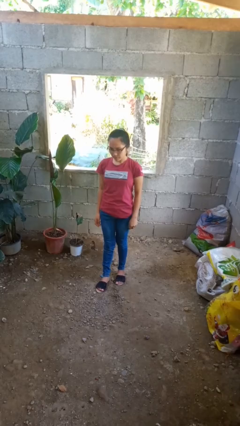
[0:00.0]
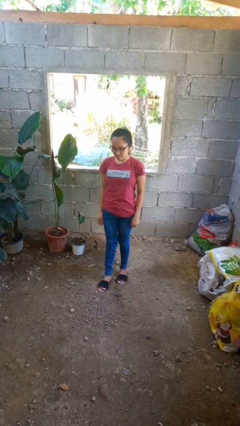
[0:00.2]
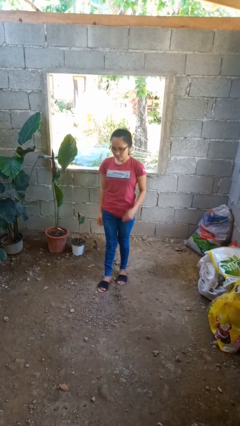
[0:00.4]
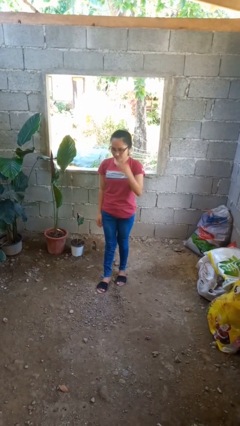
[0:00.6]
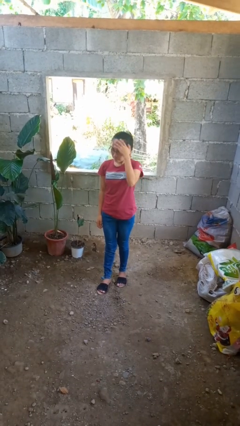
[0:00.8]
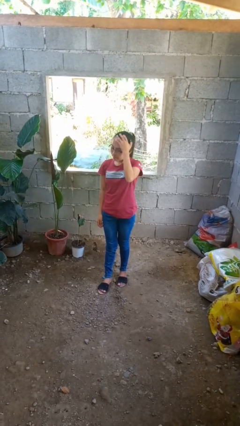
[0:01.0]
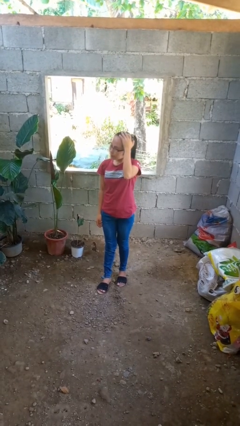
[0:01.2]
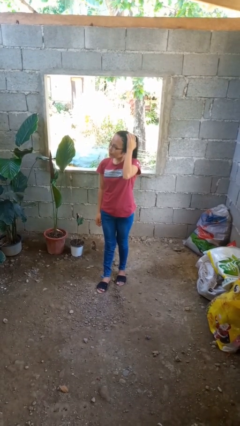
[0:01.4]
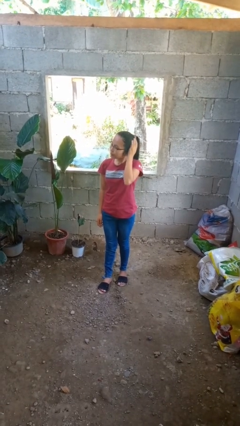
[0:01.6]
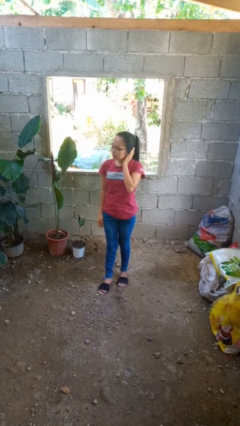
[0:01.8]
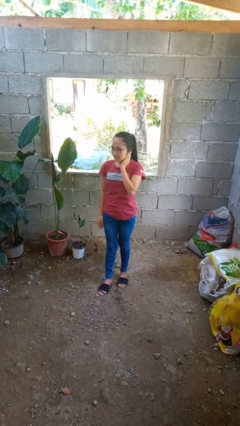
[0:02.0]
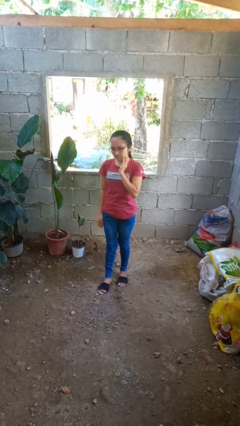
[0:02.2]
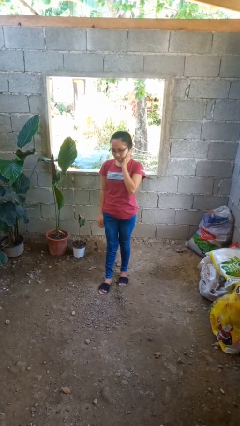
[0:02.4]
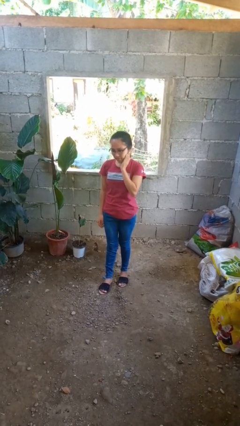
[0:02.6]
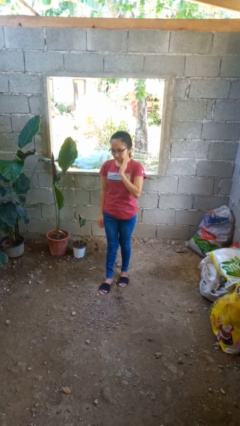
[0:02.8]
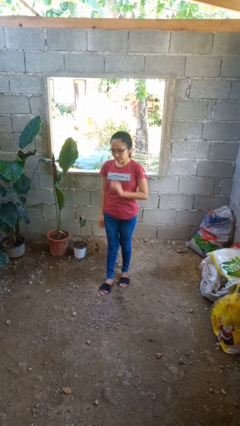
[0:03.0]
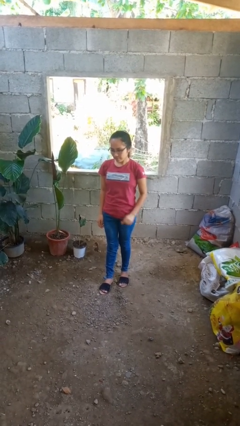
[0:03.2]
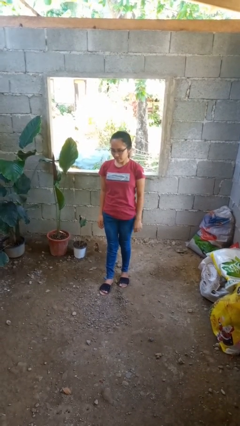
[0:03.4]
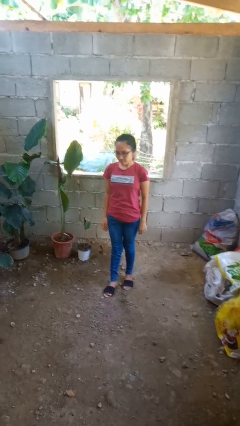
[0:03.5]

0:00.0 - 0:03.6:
person scratches face

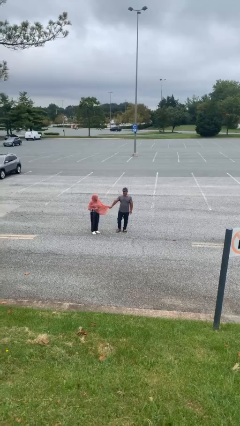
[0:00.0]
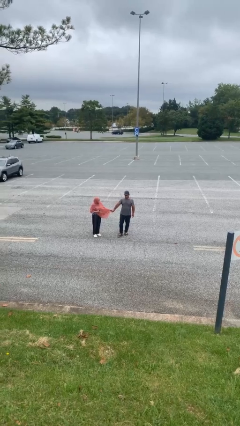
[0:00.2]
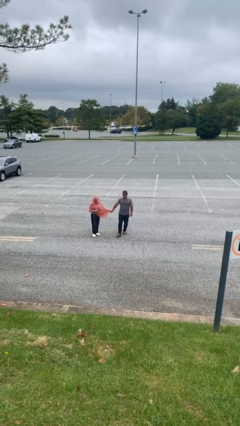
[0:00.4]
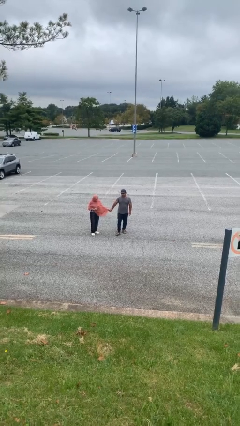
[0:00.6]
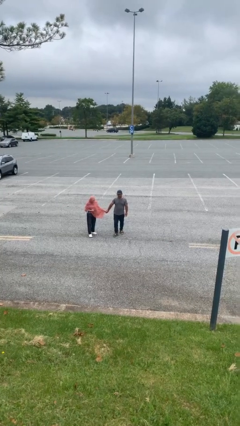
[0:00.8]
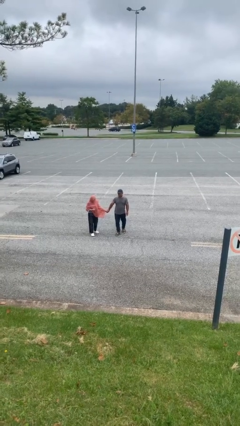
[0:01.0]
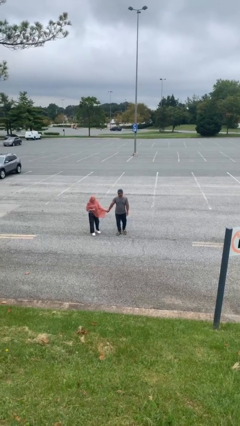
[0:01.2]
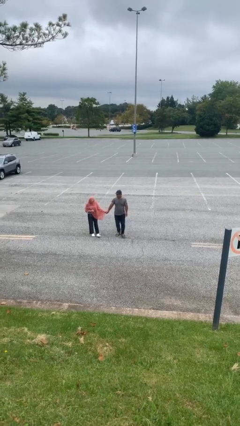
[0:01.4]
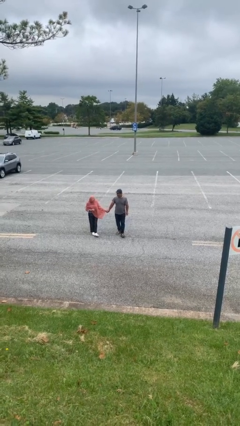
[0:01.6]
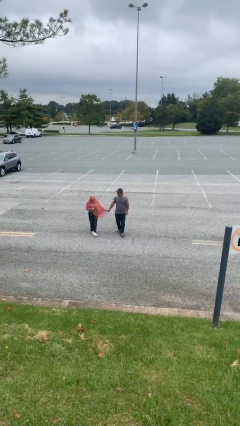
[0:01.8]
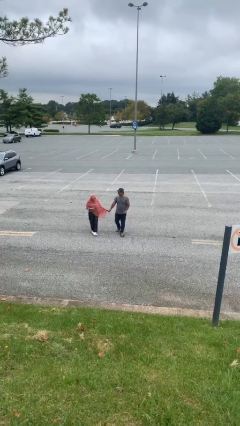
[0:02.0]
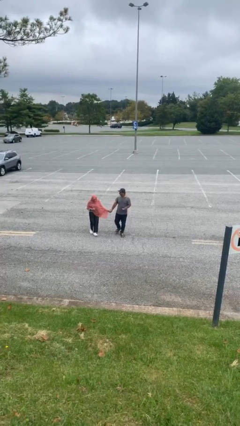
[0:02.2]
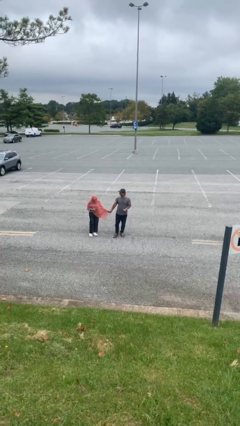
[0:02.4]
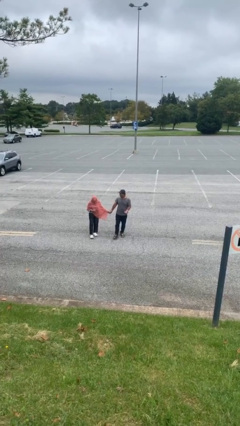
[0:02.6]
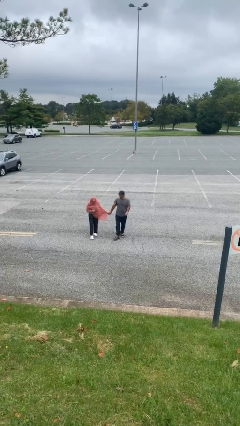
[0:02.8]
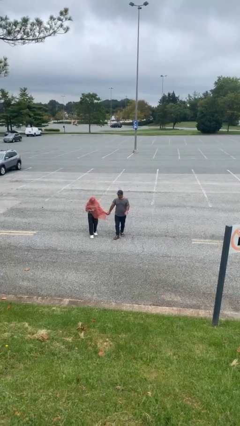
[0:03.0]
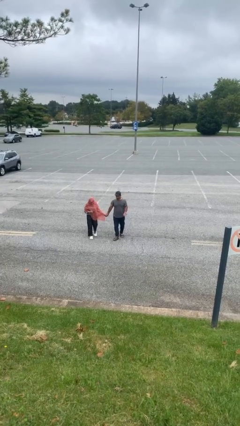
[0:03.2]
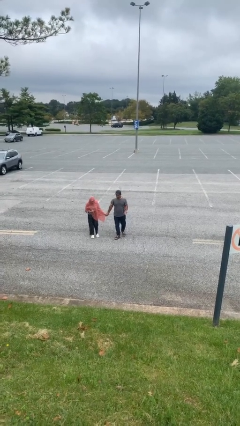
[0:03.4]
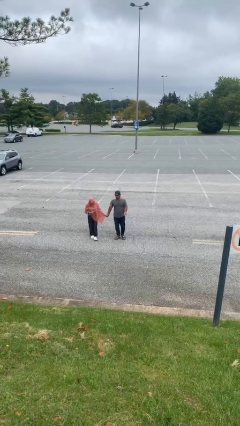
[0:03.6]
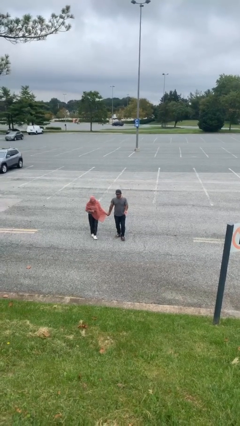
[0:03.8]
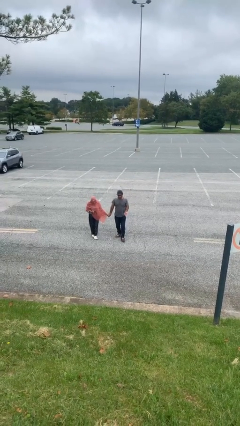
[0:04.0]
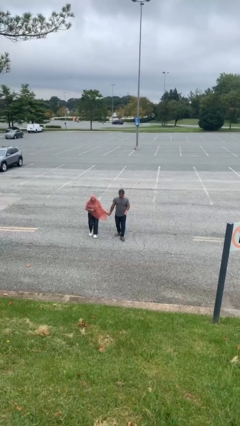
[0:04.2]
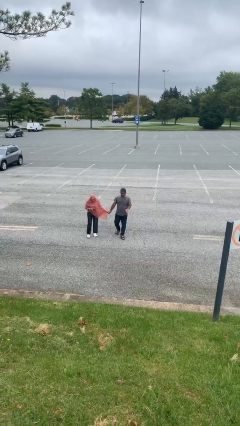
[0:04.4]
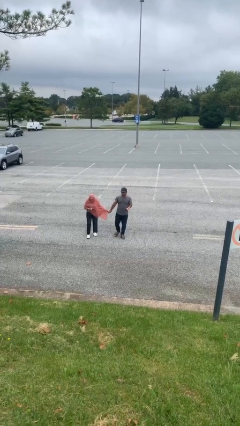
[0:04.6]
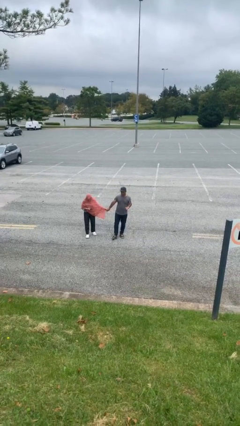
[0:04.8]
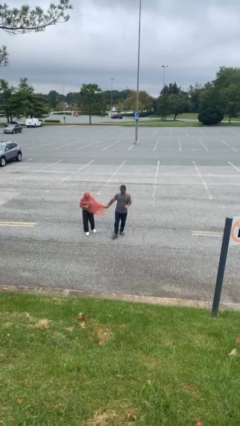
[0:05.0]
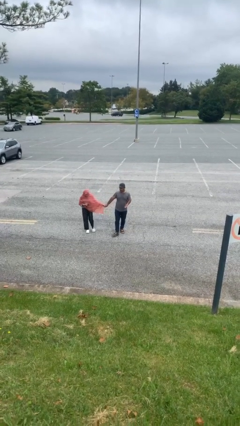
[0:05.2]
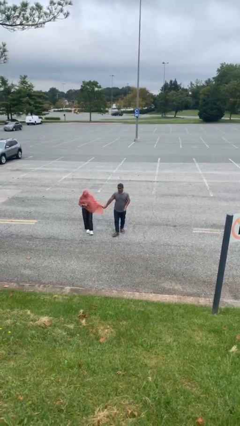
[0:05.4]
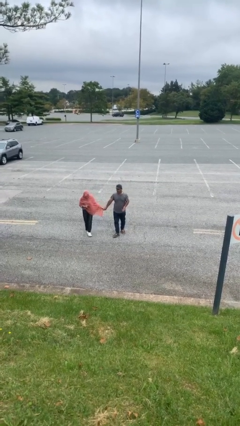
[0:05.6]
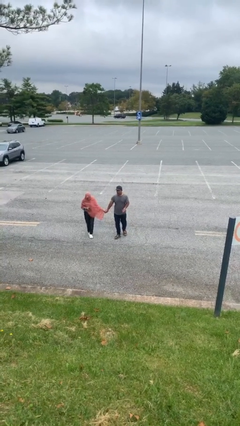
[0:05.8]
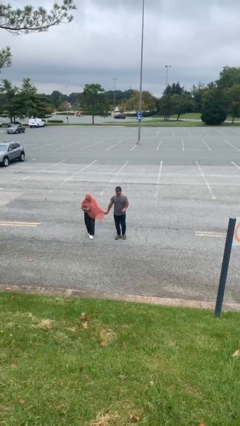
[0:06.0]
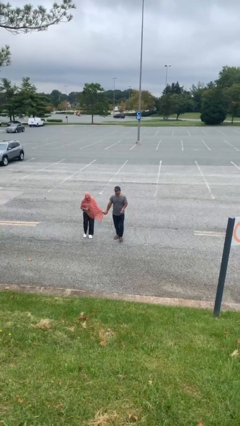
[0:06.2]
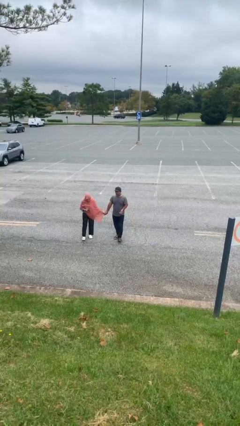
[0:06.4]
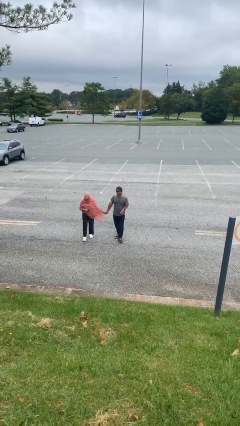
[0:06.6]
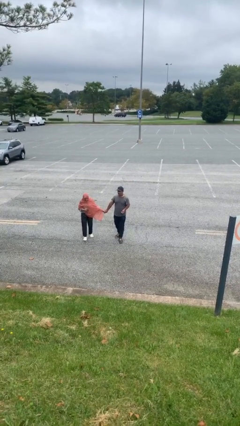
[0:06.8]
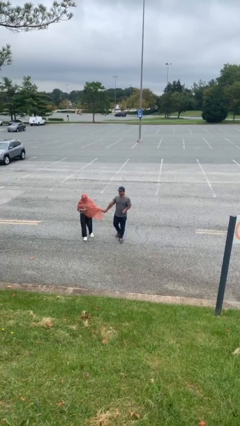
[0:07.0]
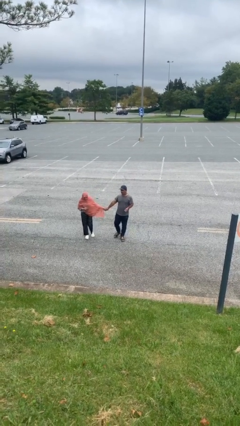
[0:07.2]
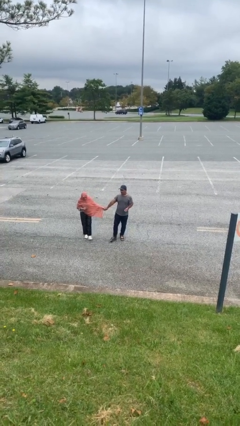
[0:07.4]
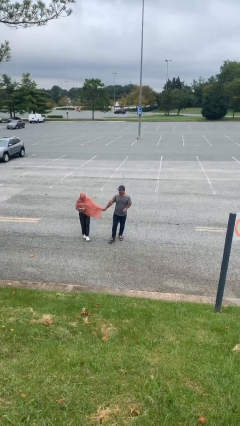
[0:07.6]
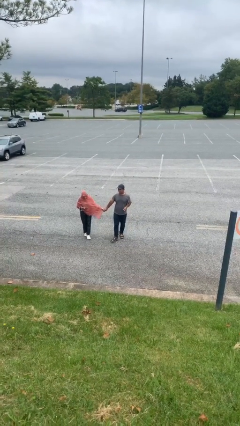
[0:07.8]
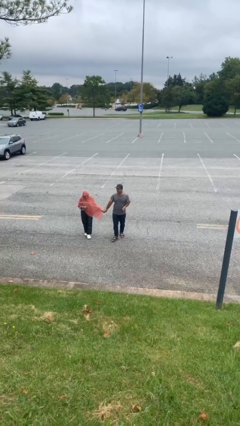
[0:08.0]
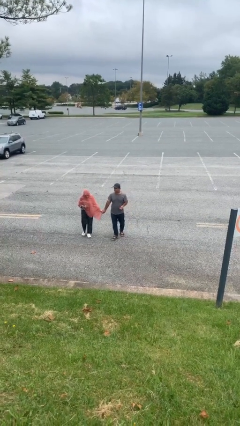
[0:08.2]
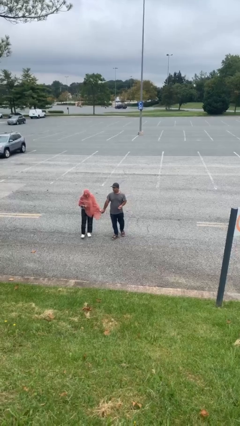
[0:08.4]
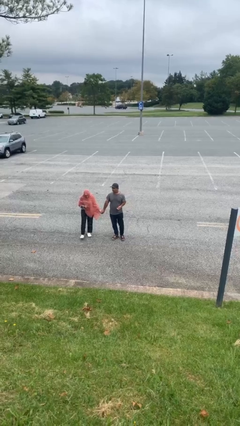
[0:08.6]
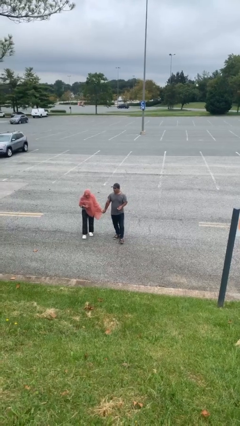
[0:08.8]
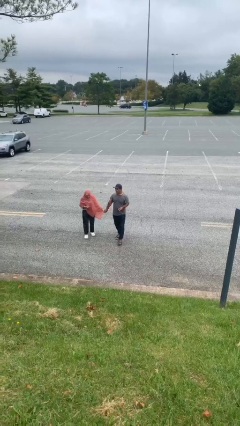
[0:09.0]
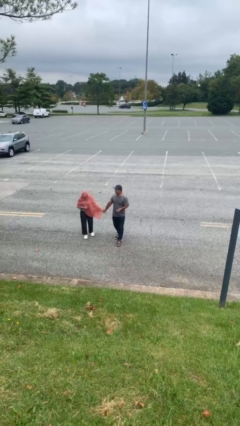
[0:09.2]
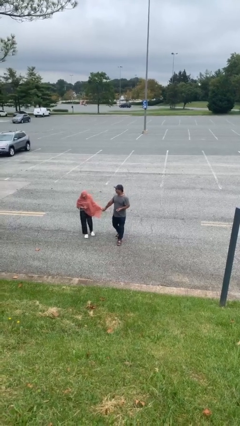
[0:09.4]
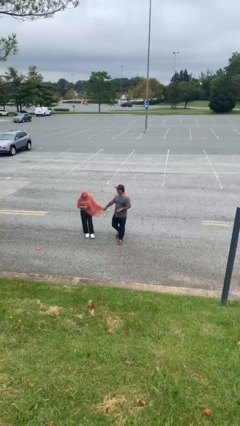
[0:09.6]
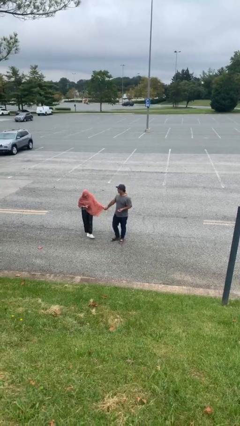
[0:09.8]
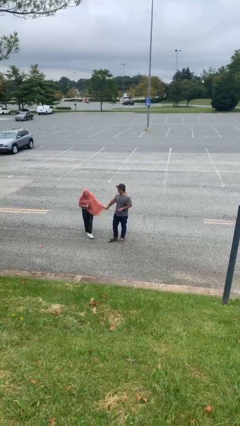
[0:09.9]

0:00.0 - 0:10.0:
person holds hand

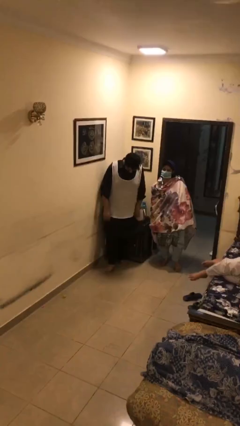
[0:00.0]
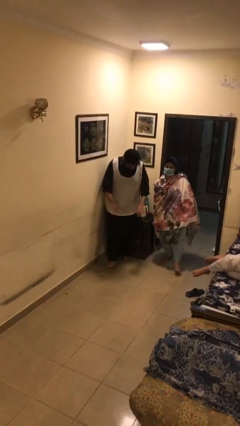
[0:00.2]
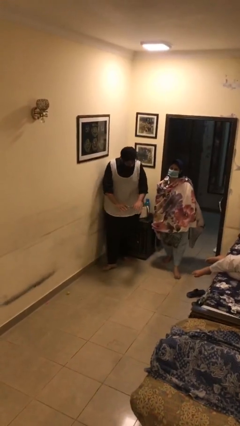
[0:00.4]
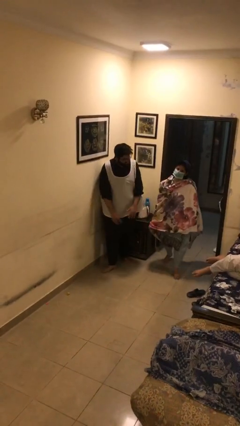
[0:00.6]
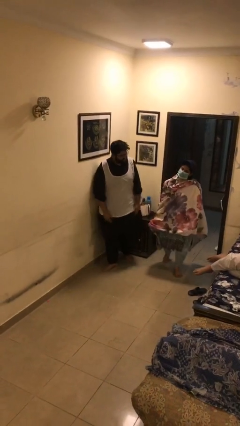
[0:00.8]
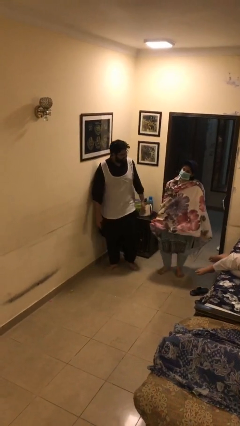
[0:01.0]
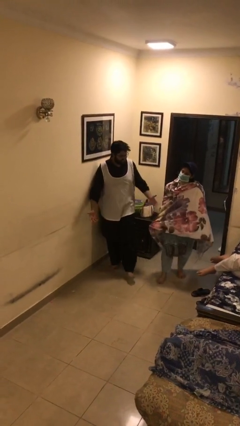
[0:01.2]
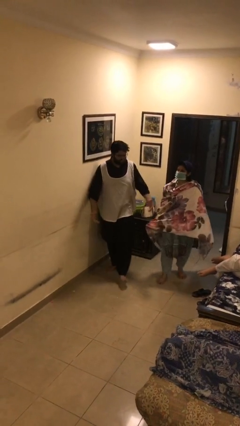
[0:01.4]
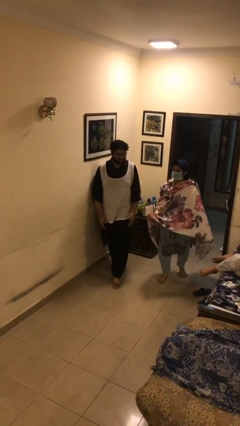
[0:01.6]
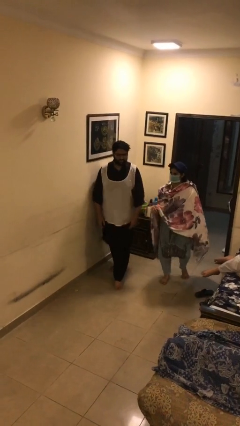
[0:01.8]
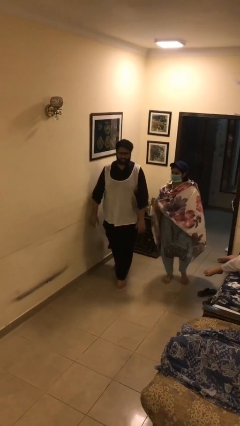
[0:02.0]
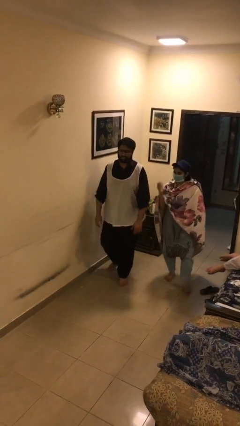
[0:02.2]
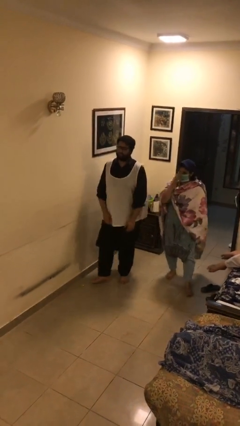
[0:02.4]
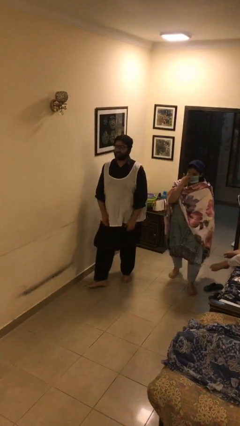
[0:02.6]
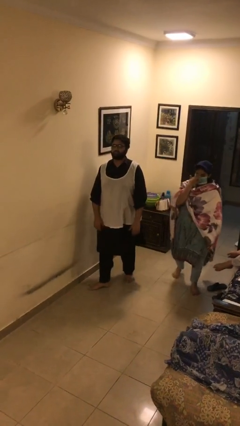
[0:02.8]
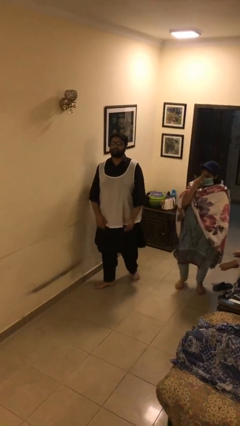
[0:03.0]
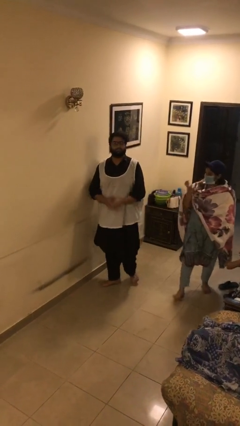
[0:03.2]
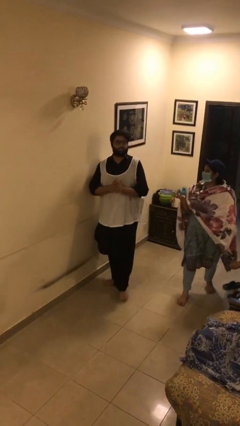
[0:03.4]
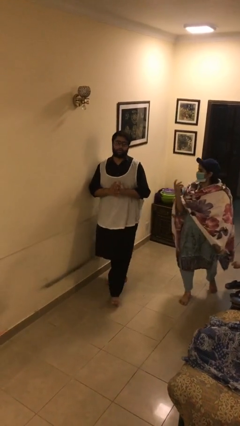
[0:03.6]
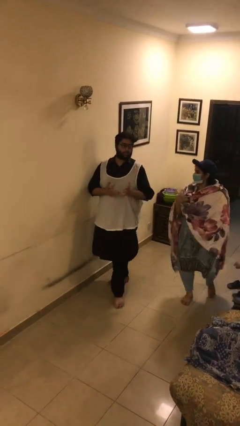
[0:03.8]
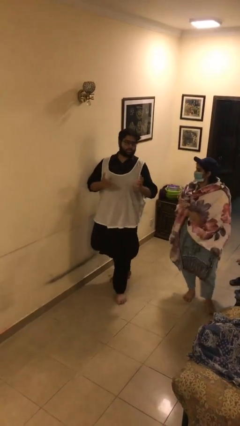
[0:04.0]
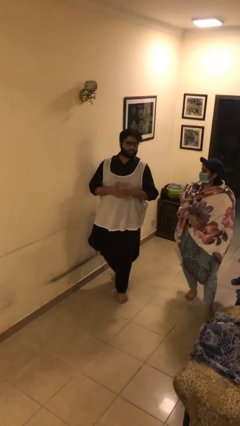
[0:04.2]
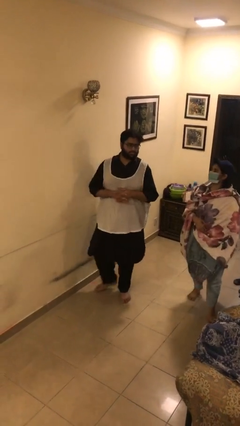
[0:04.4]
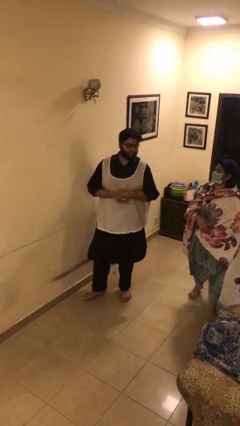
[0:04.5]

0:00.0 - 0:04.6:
person talks to person
